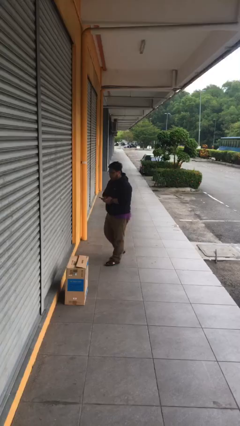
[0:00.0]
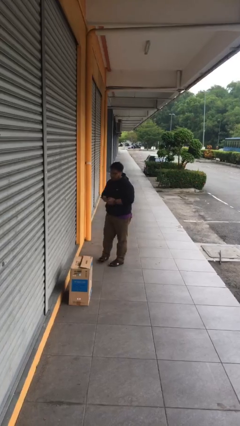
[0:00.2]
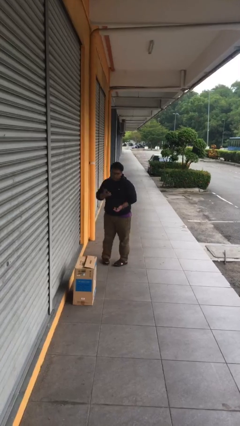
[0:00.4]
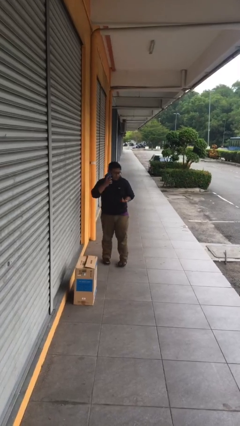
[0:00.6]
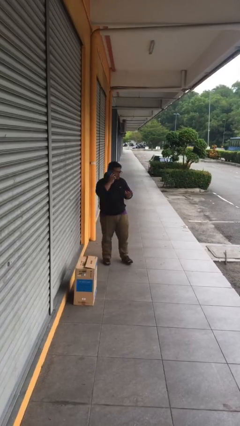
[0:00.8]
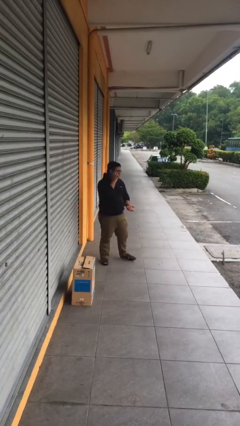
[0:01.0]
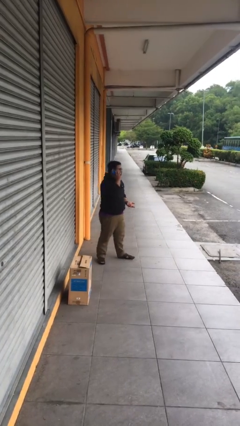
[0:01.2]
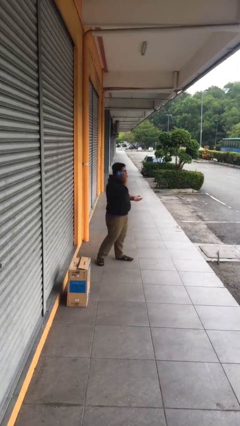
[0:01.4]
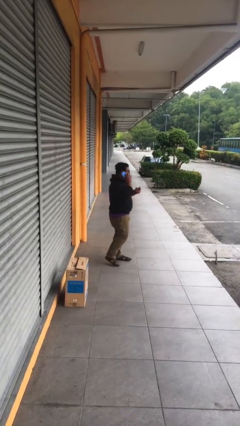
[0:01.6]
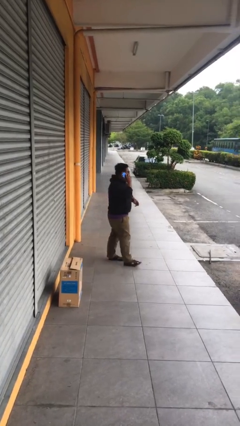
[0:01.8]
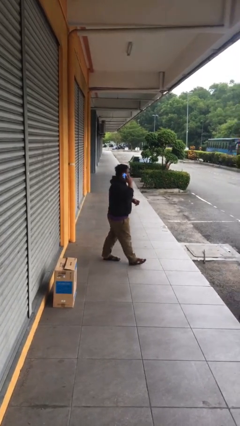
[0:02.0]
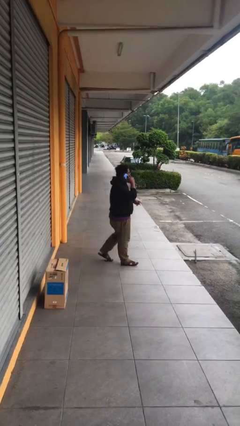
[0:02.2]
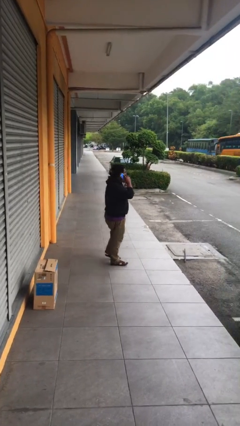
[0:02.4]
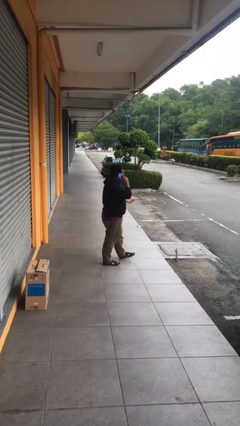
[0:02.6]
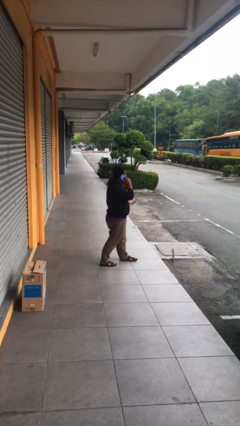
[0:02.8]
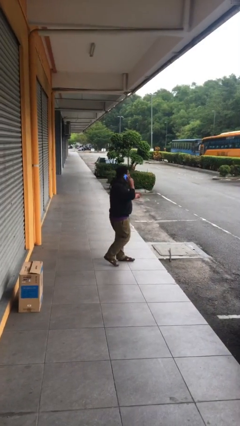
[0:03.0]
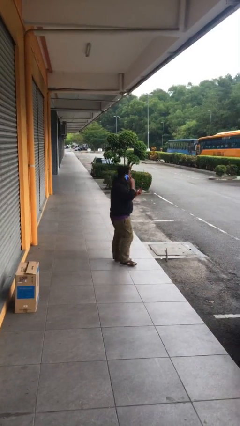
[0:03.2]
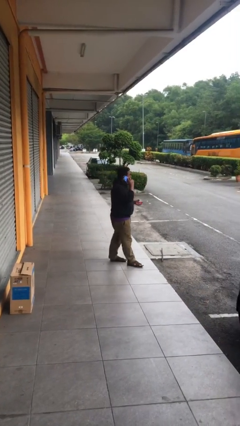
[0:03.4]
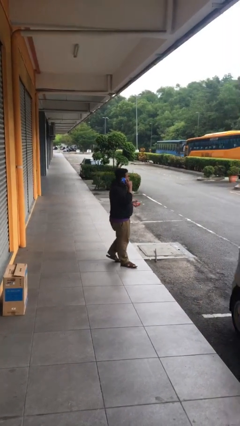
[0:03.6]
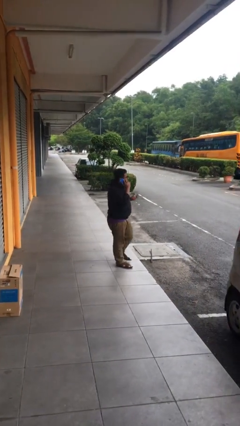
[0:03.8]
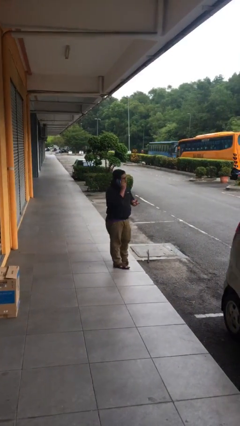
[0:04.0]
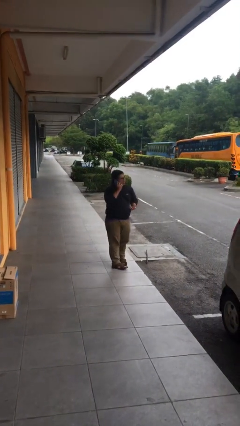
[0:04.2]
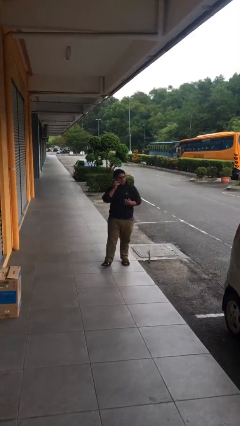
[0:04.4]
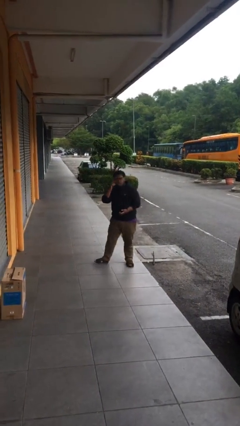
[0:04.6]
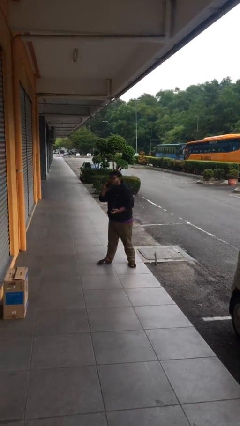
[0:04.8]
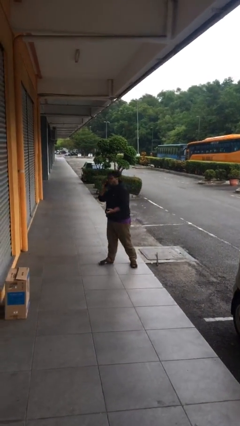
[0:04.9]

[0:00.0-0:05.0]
person talks on phone

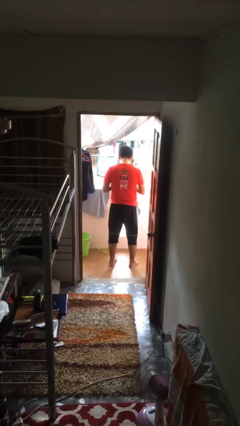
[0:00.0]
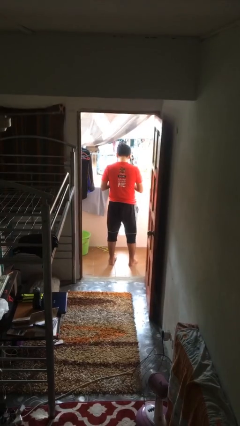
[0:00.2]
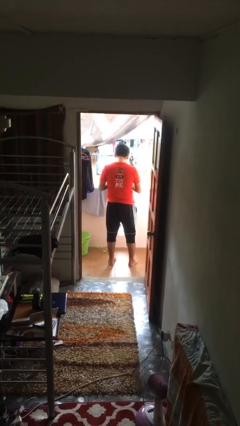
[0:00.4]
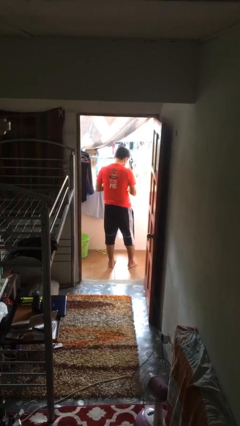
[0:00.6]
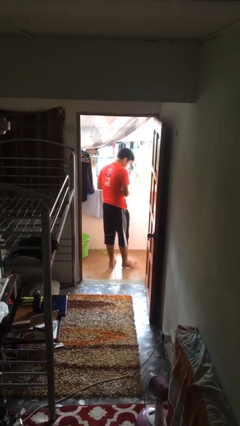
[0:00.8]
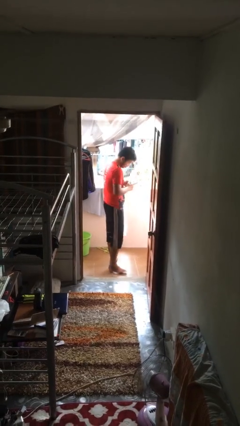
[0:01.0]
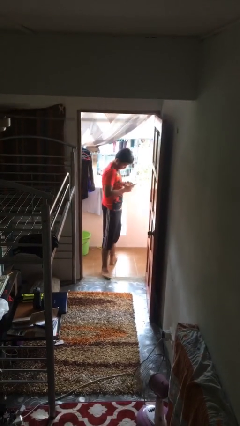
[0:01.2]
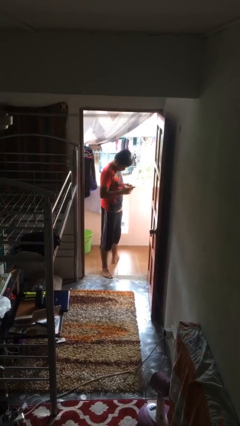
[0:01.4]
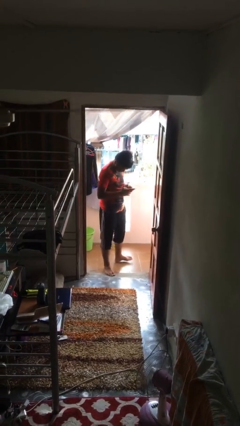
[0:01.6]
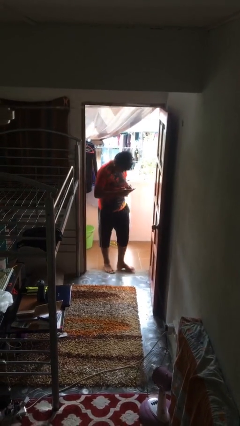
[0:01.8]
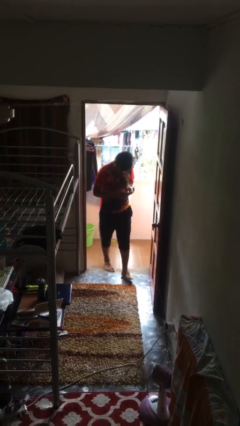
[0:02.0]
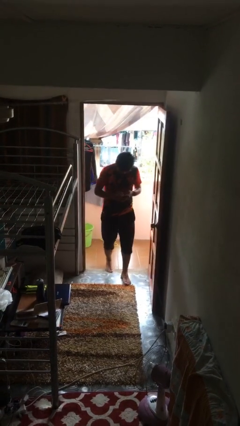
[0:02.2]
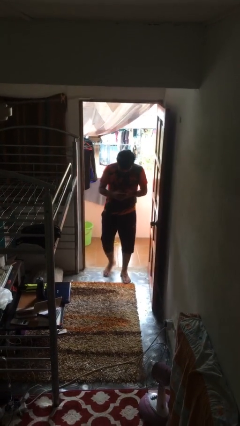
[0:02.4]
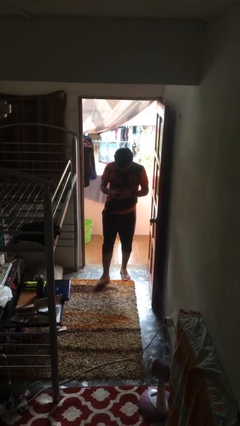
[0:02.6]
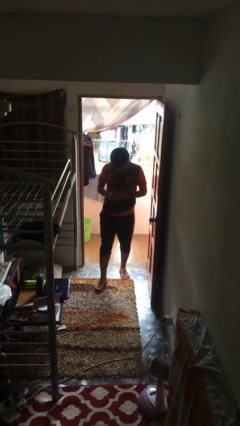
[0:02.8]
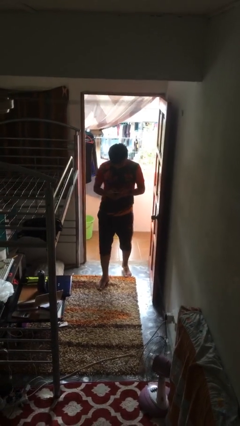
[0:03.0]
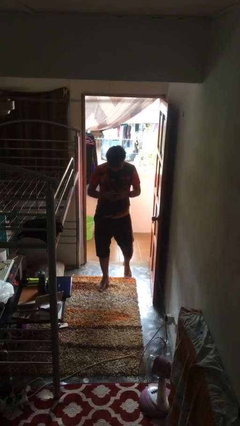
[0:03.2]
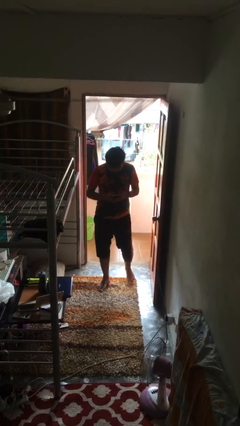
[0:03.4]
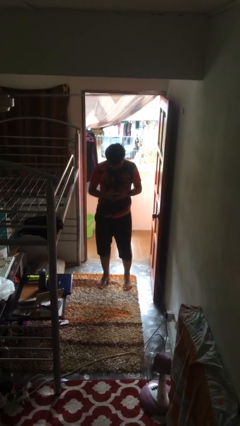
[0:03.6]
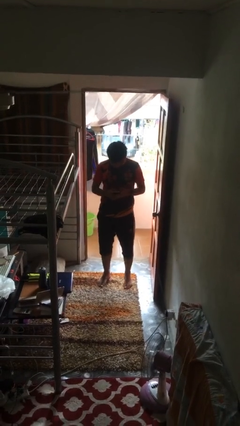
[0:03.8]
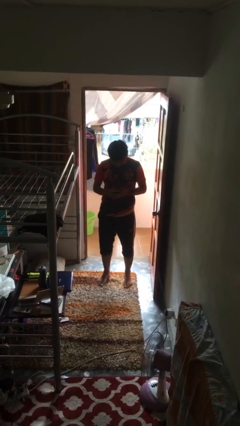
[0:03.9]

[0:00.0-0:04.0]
person enters scene through structure

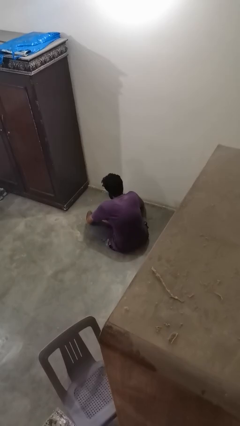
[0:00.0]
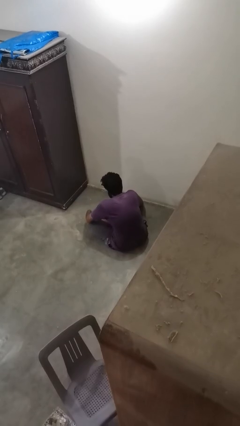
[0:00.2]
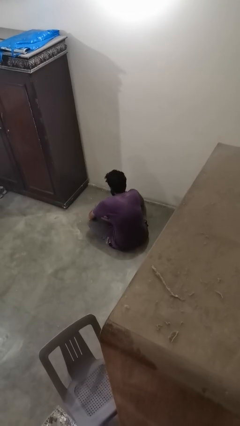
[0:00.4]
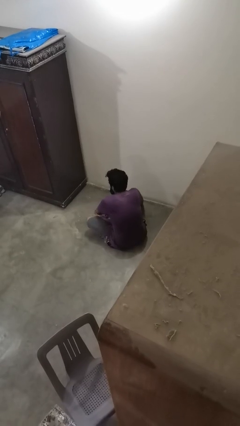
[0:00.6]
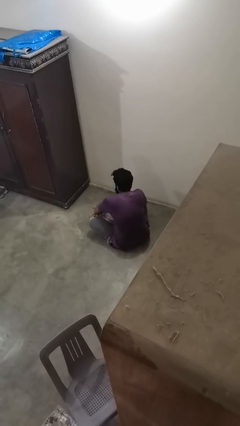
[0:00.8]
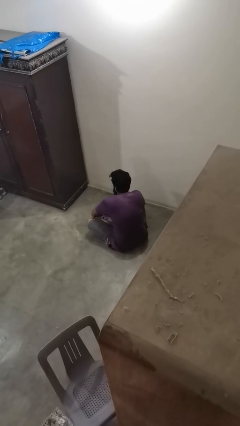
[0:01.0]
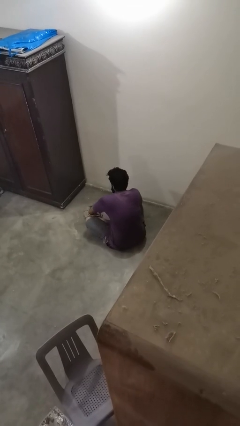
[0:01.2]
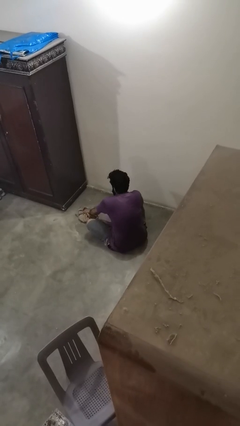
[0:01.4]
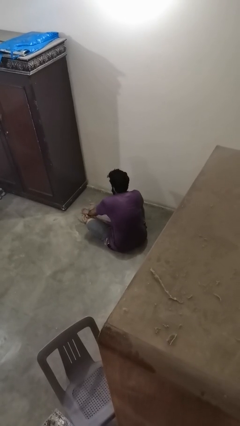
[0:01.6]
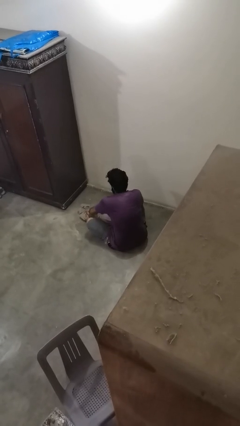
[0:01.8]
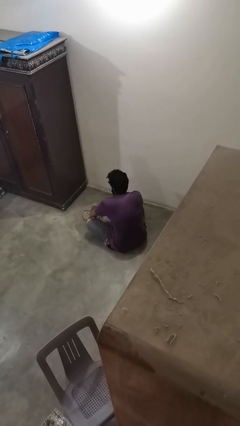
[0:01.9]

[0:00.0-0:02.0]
person mops

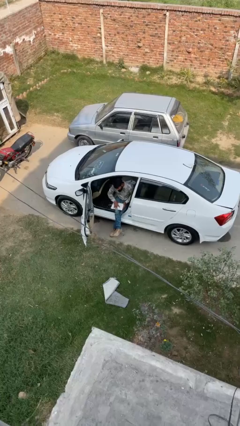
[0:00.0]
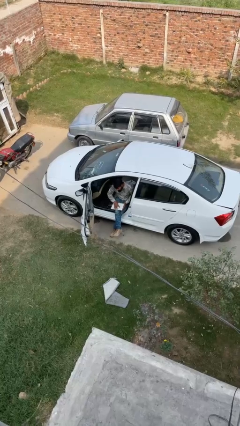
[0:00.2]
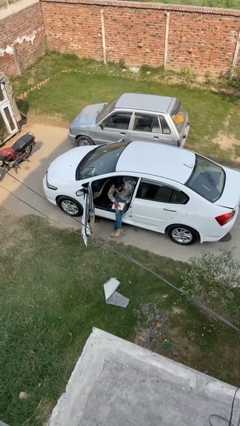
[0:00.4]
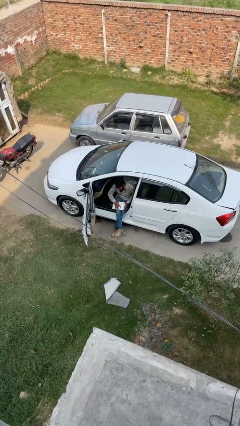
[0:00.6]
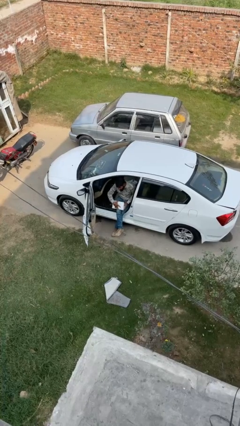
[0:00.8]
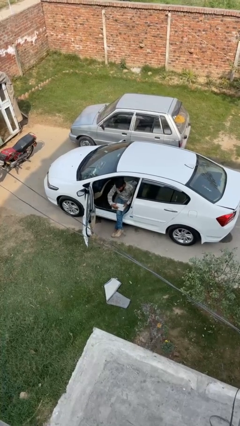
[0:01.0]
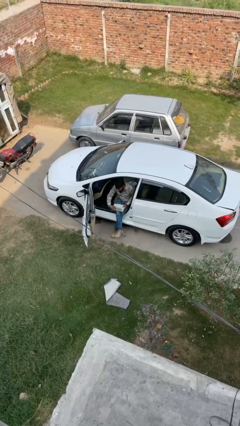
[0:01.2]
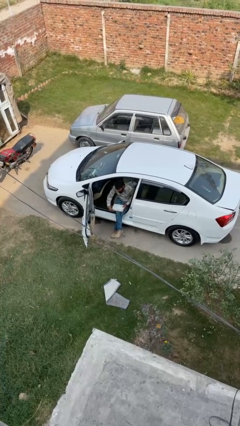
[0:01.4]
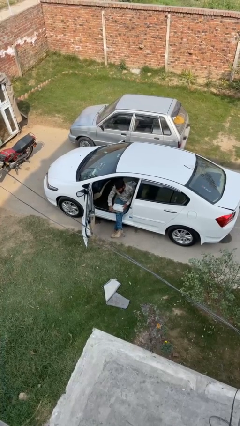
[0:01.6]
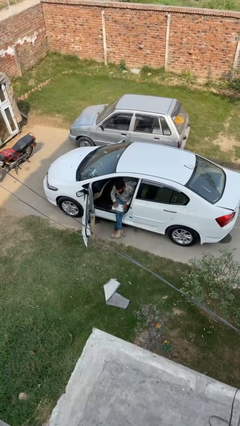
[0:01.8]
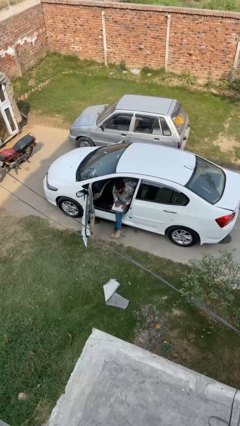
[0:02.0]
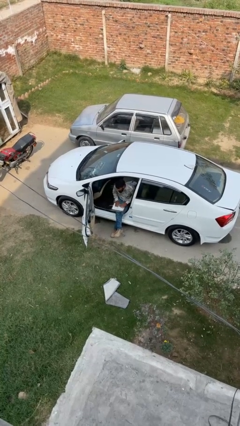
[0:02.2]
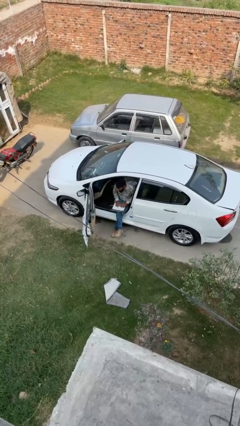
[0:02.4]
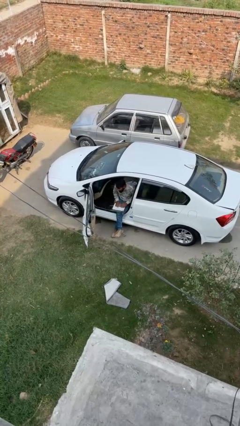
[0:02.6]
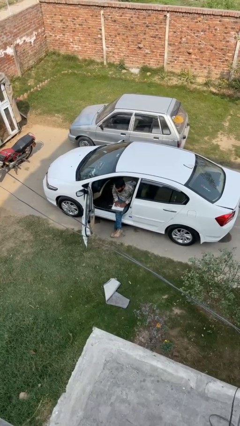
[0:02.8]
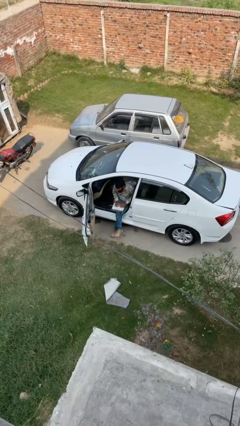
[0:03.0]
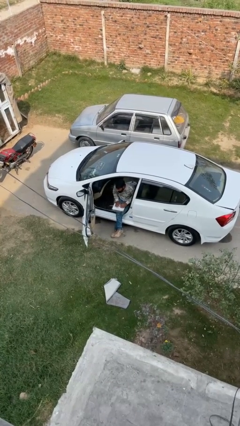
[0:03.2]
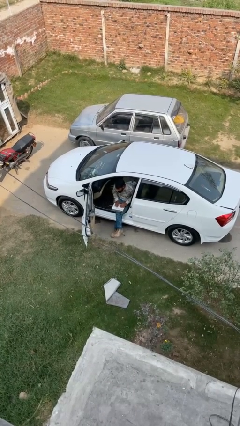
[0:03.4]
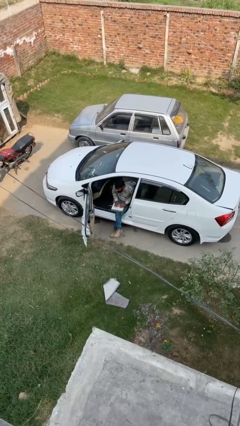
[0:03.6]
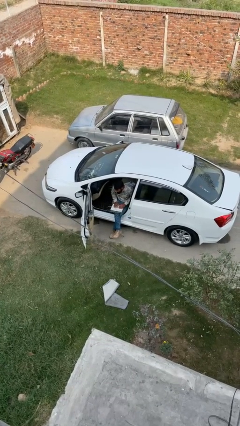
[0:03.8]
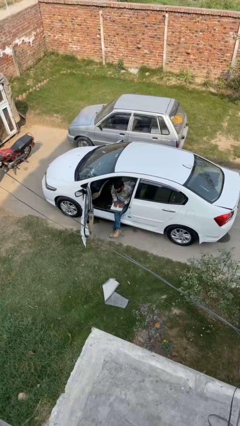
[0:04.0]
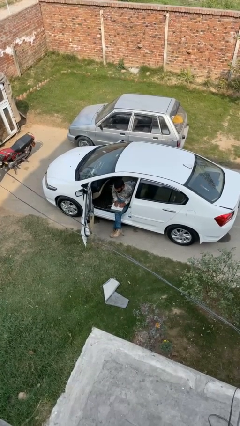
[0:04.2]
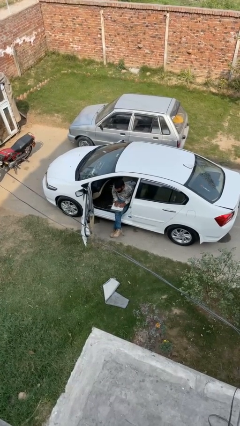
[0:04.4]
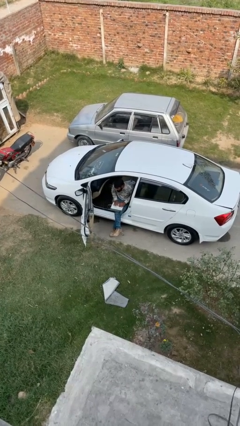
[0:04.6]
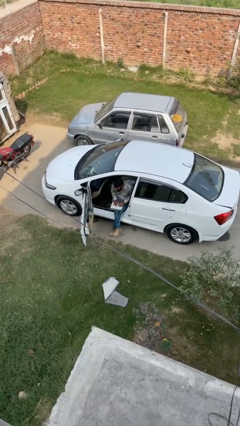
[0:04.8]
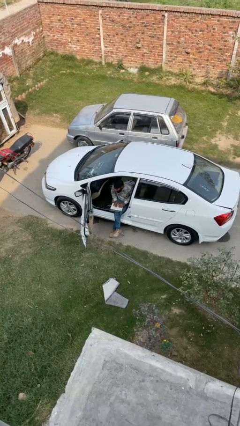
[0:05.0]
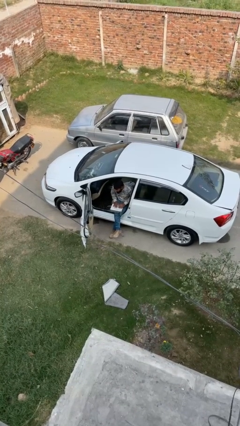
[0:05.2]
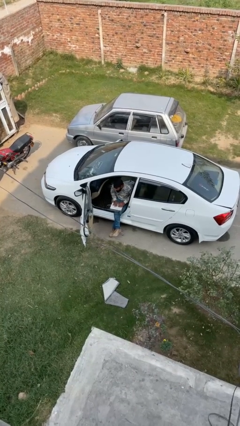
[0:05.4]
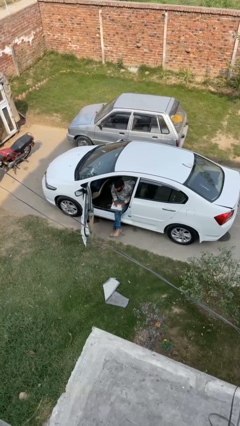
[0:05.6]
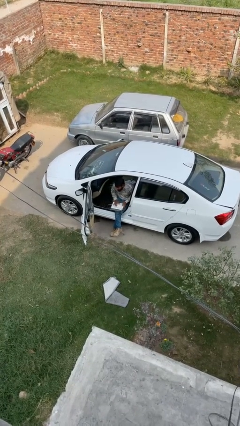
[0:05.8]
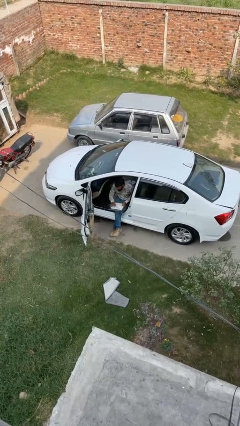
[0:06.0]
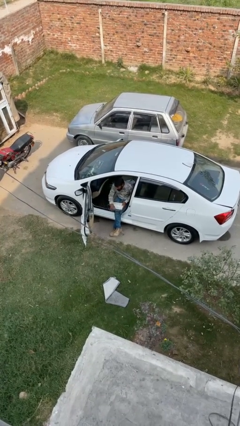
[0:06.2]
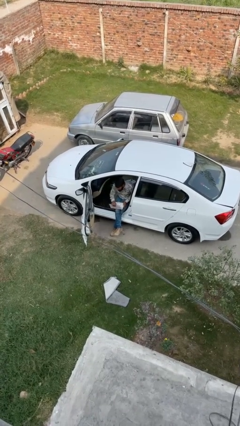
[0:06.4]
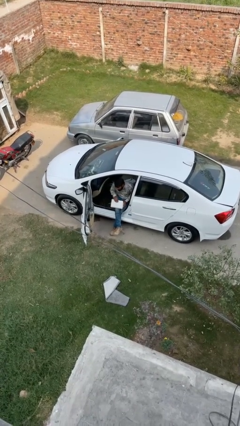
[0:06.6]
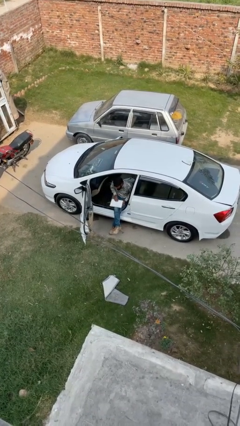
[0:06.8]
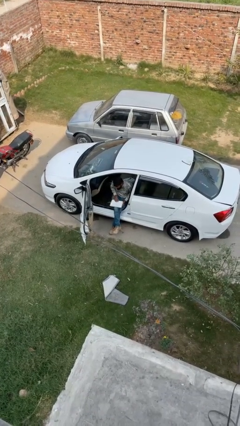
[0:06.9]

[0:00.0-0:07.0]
person interacts with laptop
